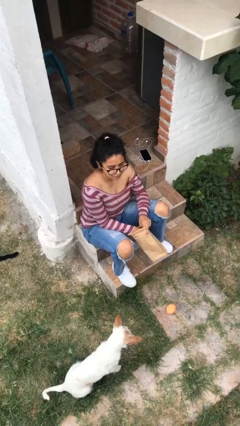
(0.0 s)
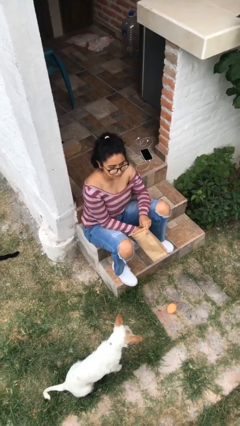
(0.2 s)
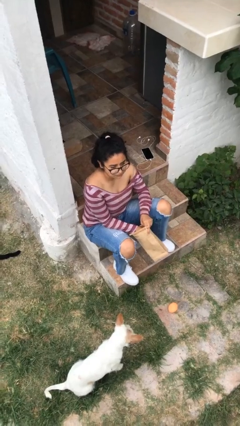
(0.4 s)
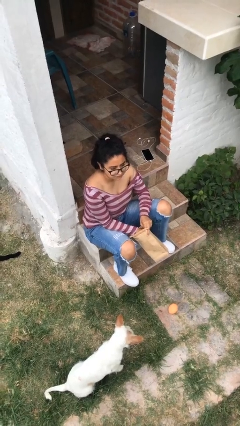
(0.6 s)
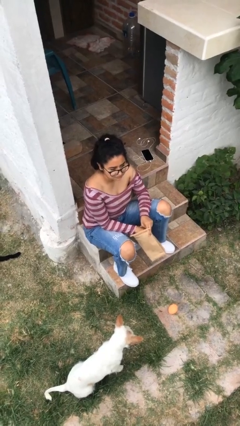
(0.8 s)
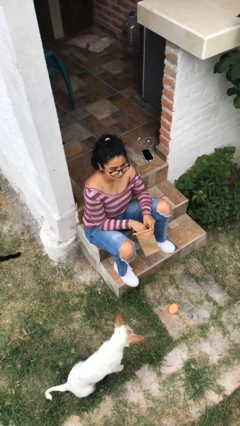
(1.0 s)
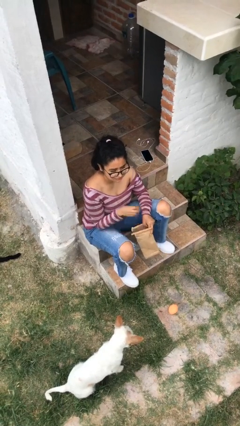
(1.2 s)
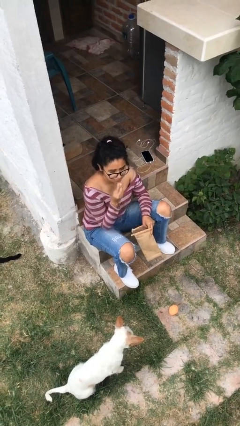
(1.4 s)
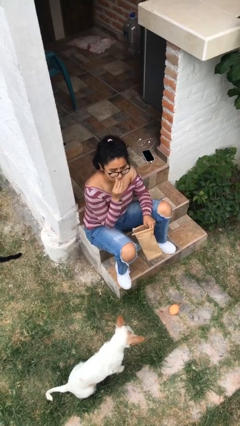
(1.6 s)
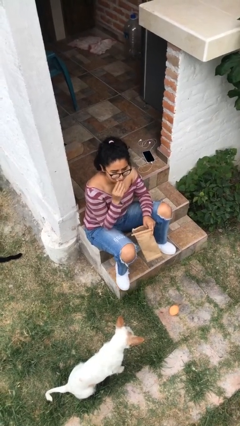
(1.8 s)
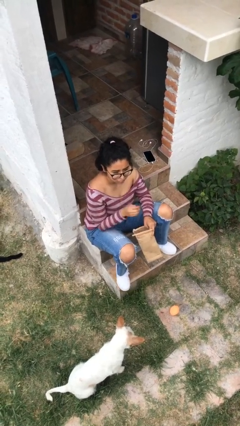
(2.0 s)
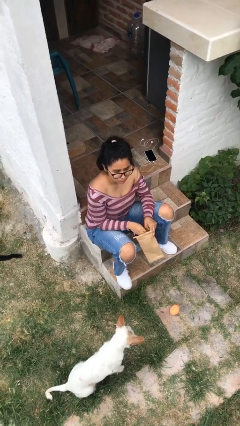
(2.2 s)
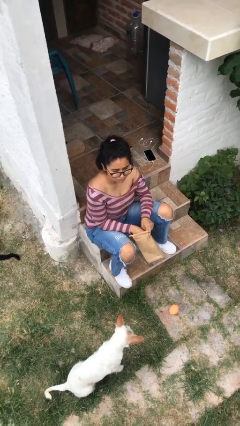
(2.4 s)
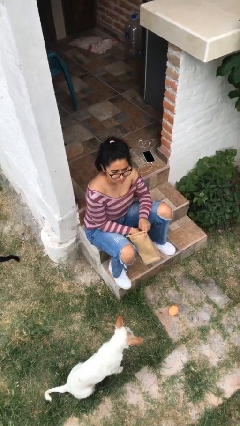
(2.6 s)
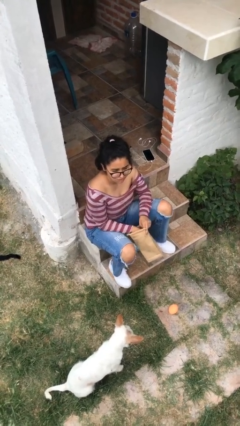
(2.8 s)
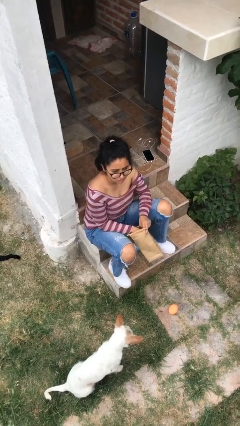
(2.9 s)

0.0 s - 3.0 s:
person eats snack from bag

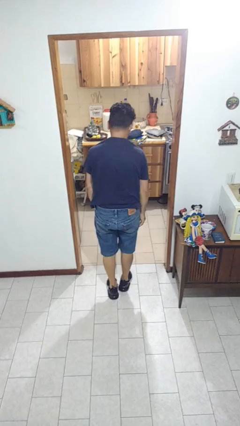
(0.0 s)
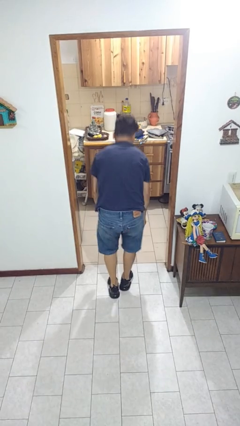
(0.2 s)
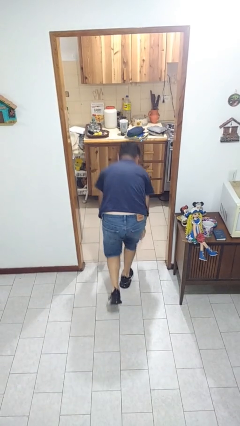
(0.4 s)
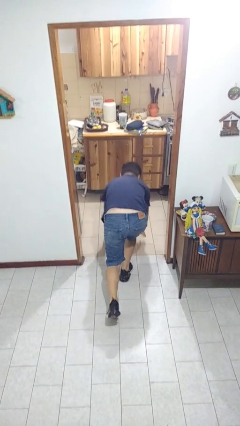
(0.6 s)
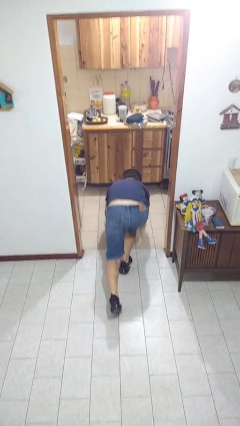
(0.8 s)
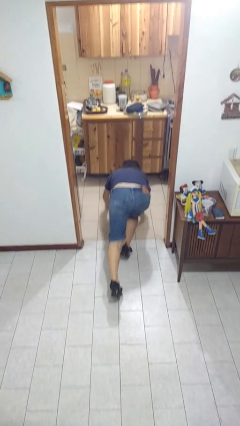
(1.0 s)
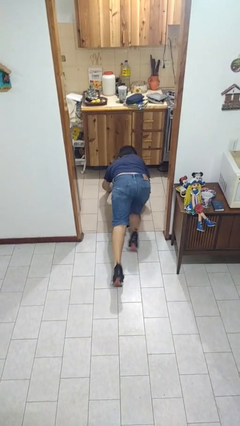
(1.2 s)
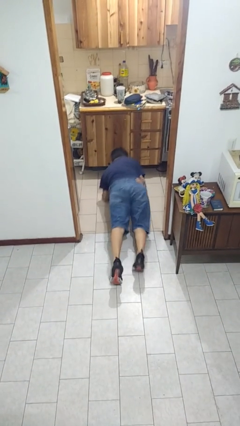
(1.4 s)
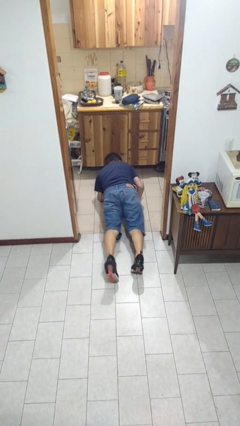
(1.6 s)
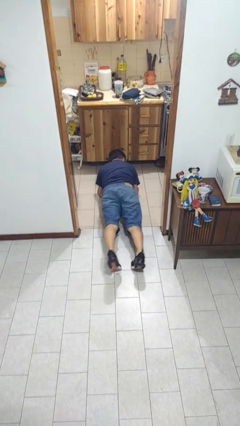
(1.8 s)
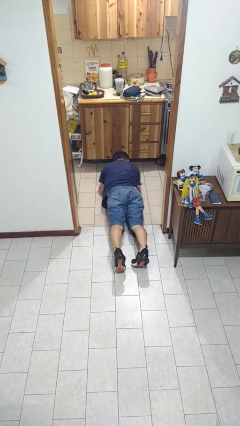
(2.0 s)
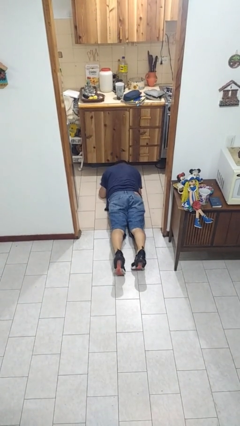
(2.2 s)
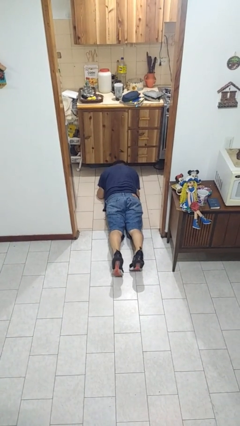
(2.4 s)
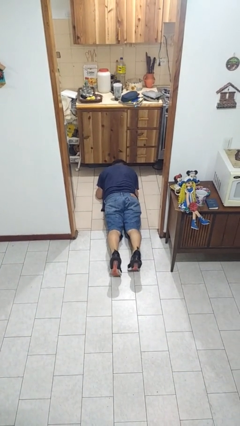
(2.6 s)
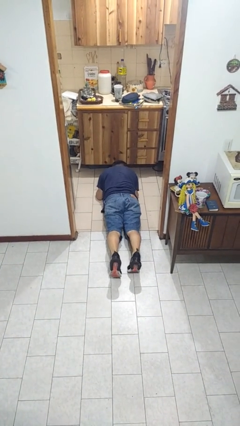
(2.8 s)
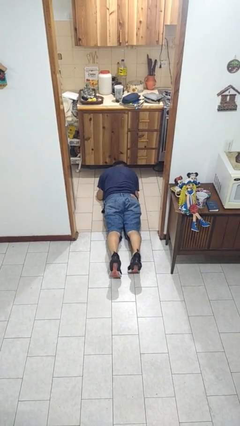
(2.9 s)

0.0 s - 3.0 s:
person exercises with plank

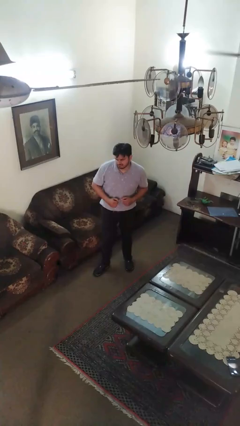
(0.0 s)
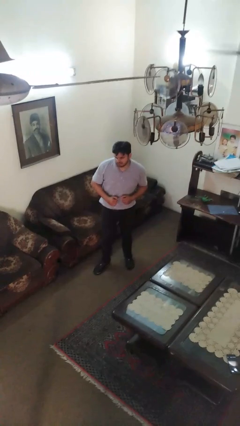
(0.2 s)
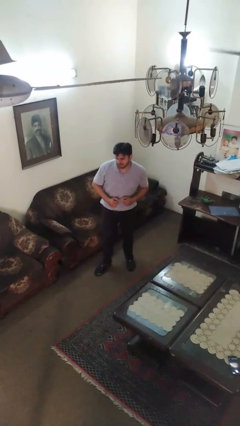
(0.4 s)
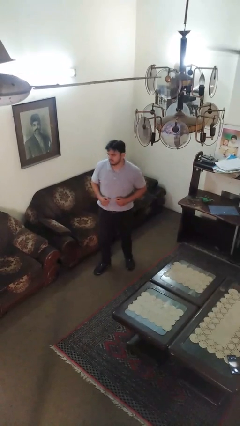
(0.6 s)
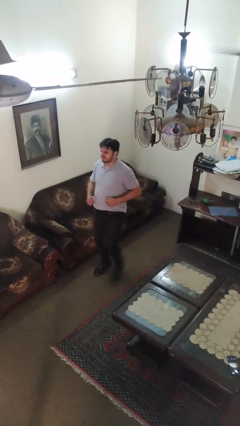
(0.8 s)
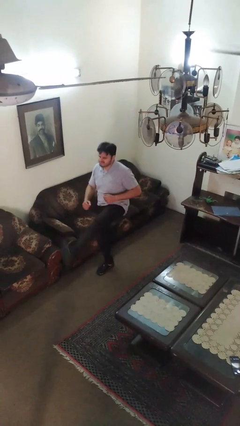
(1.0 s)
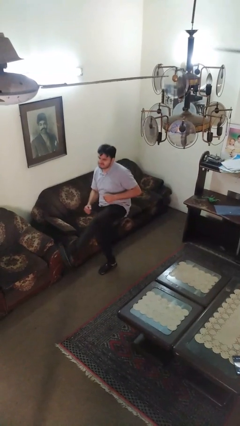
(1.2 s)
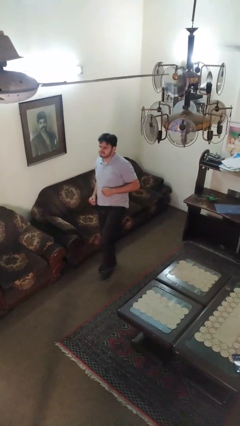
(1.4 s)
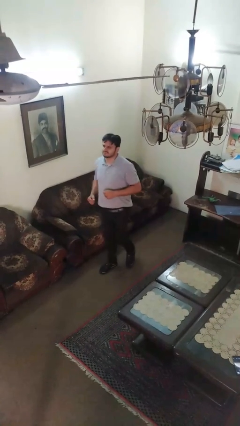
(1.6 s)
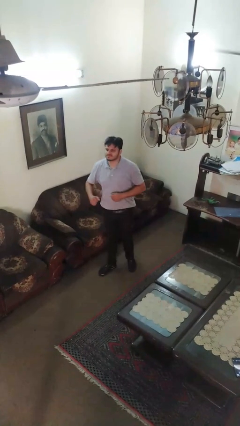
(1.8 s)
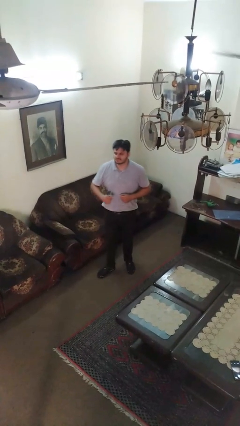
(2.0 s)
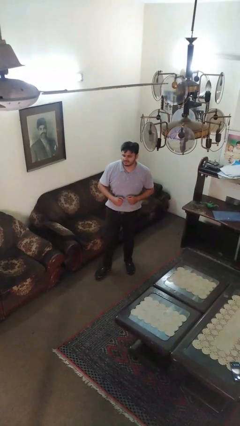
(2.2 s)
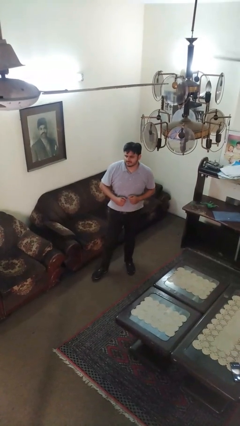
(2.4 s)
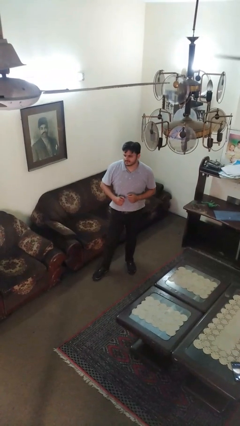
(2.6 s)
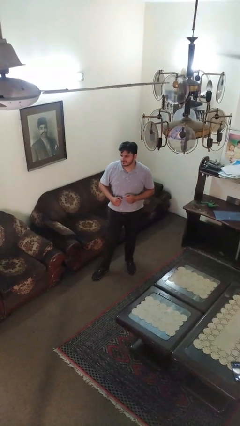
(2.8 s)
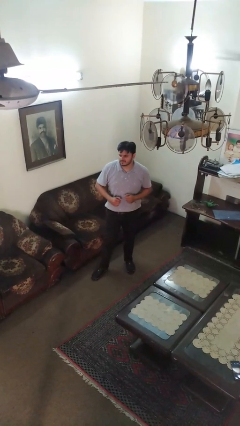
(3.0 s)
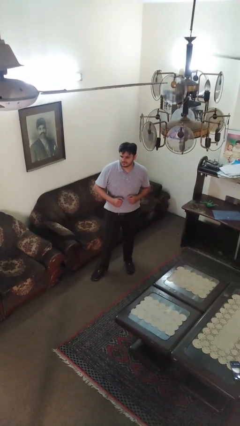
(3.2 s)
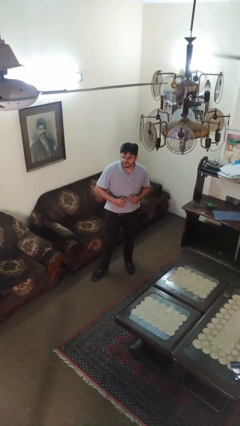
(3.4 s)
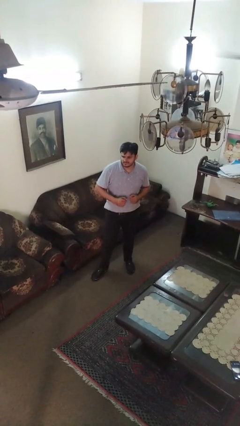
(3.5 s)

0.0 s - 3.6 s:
person karate kicks

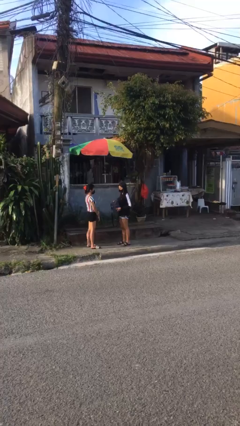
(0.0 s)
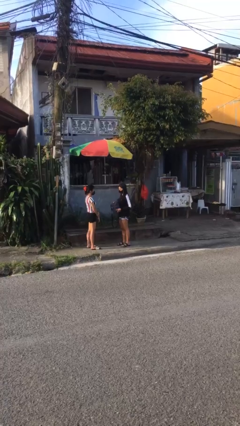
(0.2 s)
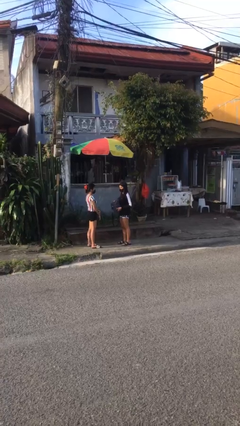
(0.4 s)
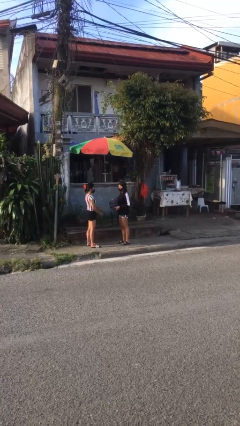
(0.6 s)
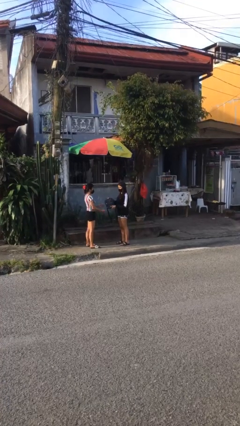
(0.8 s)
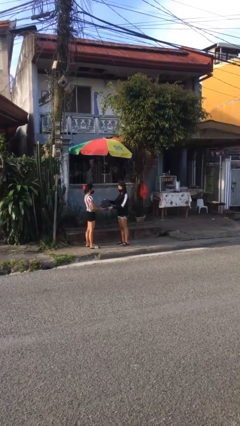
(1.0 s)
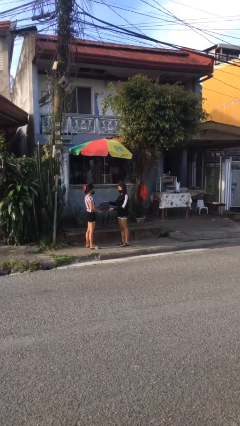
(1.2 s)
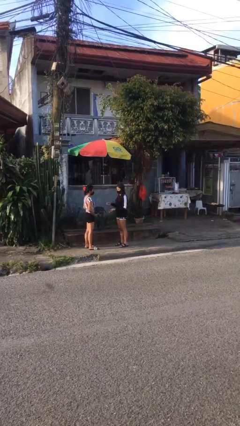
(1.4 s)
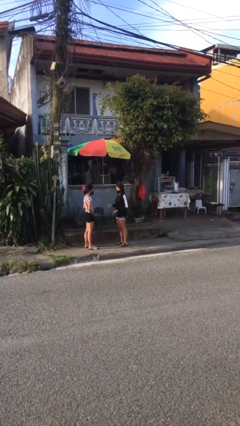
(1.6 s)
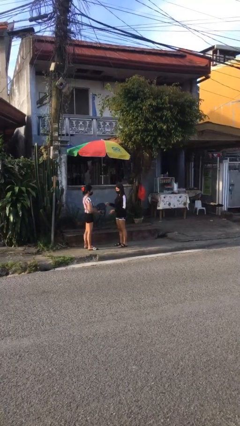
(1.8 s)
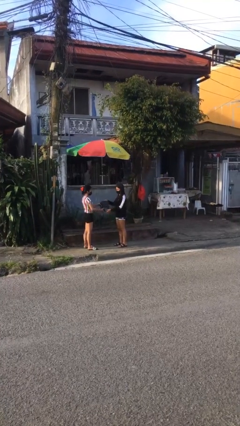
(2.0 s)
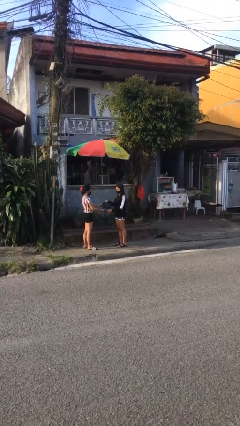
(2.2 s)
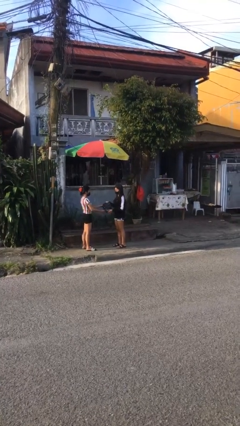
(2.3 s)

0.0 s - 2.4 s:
person transfers object to person

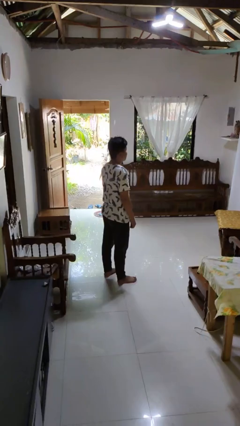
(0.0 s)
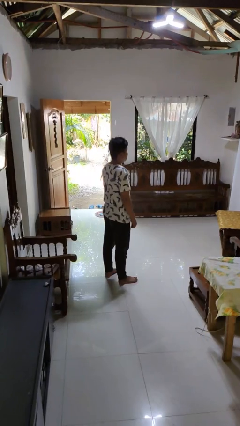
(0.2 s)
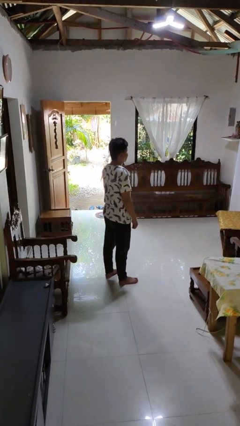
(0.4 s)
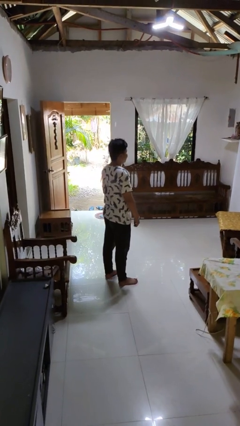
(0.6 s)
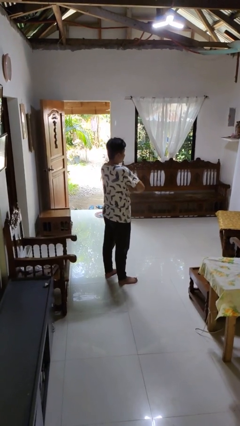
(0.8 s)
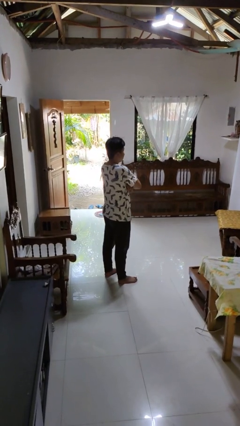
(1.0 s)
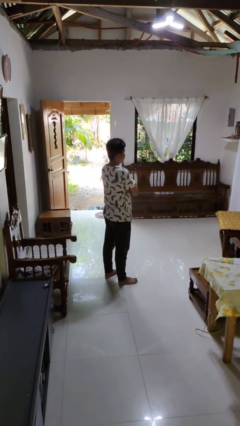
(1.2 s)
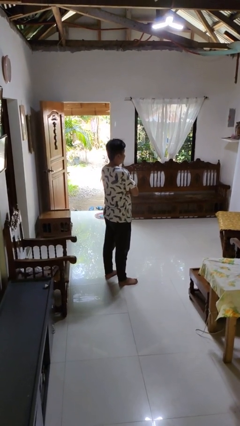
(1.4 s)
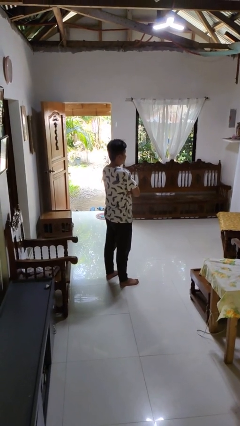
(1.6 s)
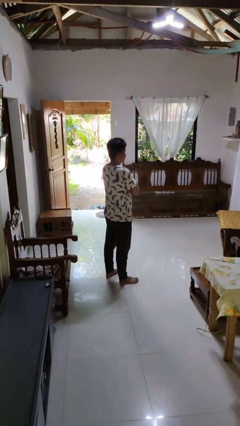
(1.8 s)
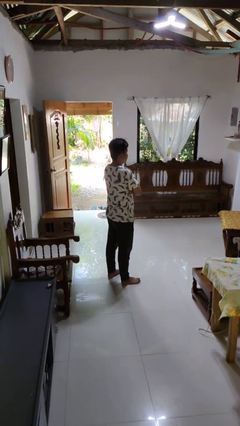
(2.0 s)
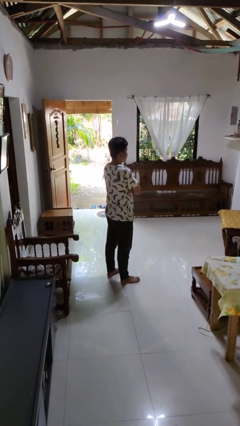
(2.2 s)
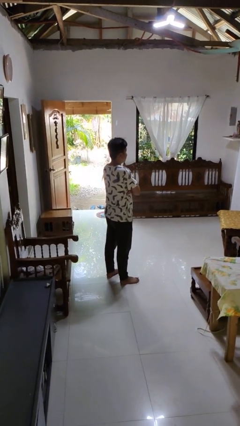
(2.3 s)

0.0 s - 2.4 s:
person crosses arms

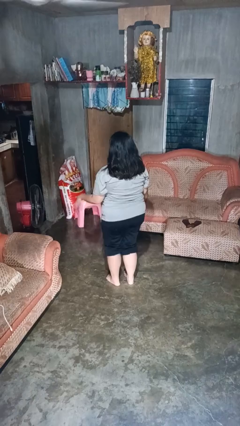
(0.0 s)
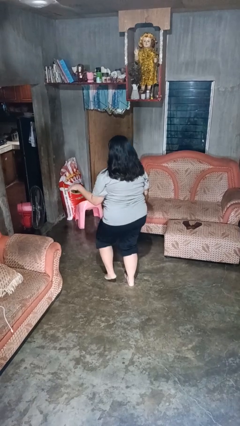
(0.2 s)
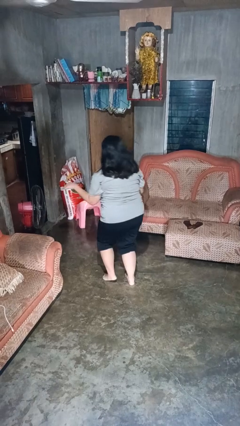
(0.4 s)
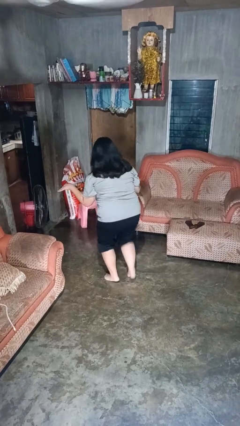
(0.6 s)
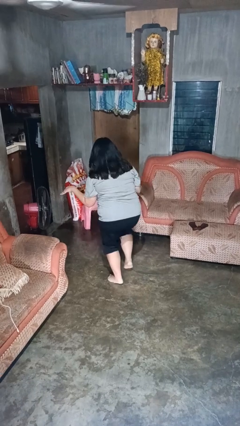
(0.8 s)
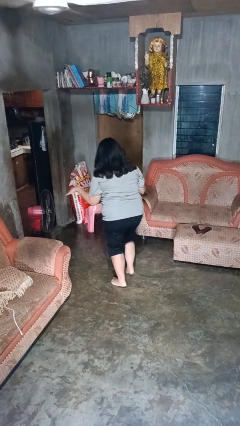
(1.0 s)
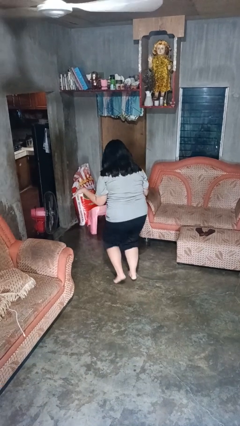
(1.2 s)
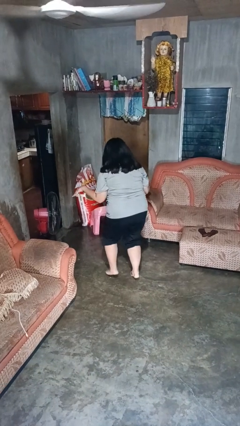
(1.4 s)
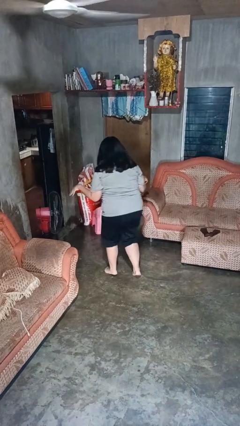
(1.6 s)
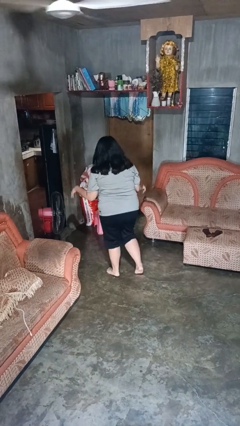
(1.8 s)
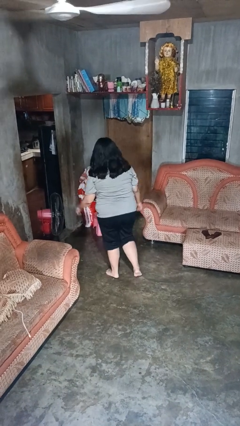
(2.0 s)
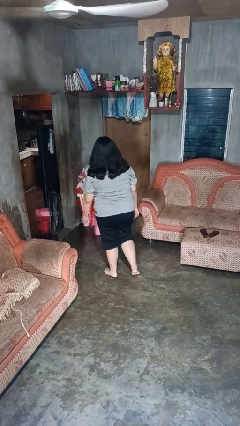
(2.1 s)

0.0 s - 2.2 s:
person walks tiptoe

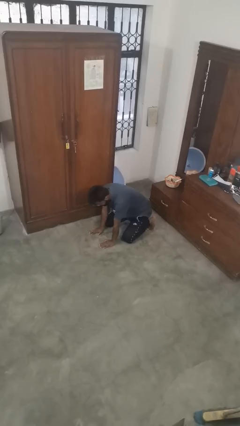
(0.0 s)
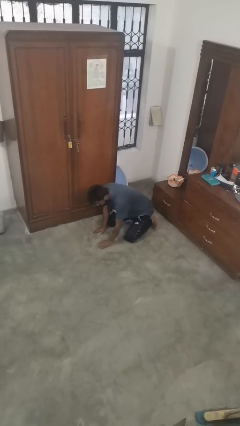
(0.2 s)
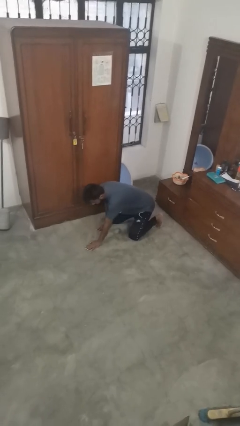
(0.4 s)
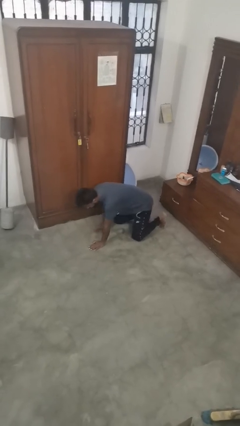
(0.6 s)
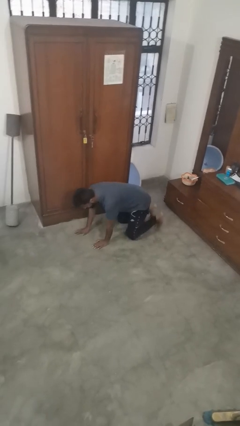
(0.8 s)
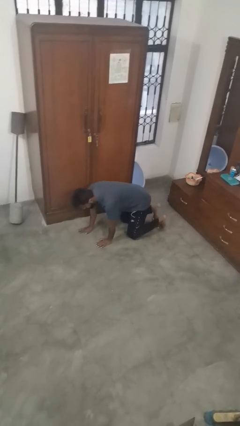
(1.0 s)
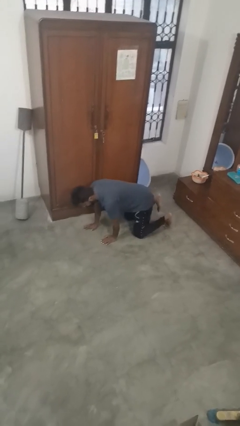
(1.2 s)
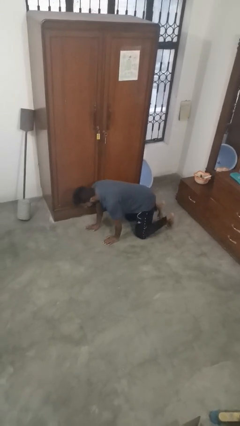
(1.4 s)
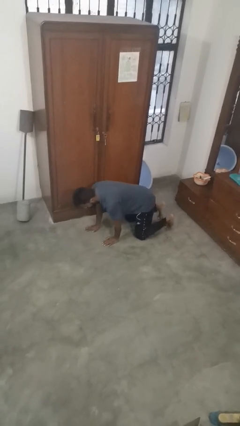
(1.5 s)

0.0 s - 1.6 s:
person crawls
